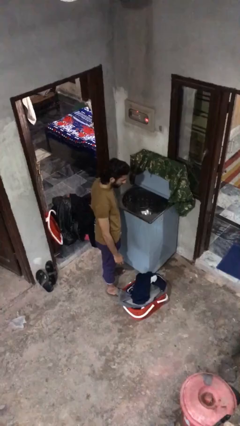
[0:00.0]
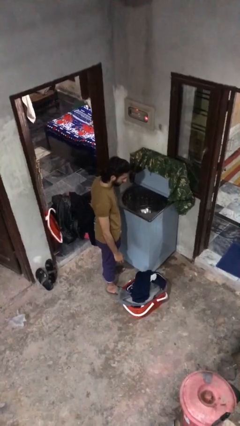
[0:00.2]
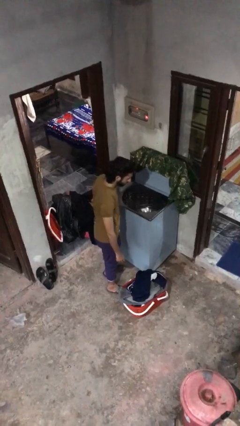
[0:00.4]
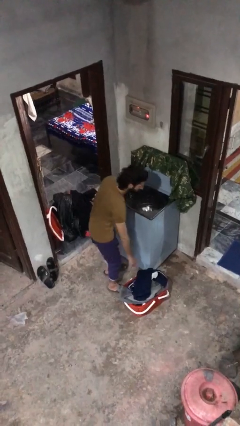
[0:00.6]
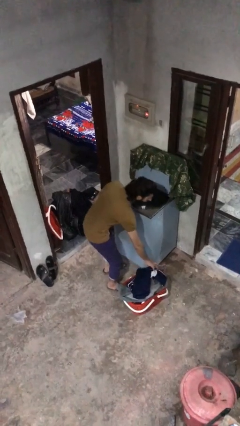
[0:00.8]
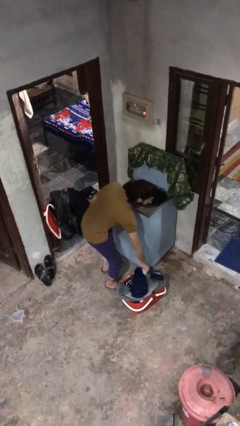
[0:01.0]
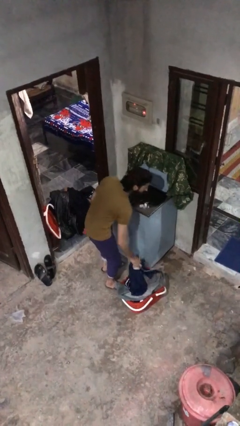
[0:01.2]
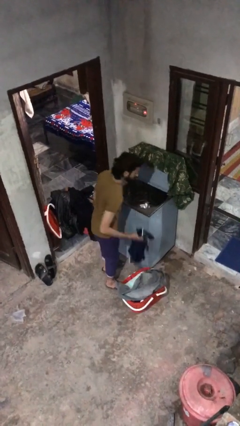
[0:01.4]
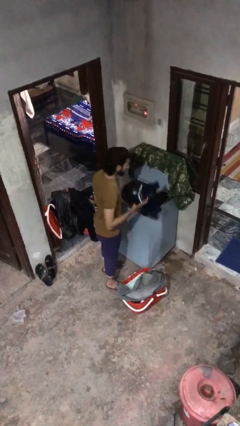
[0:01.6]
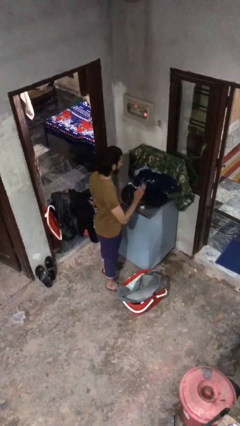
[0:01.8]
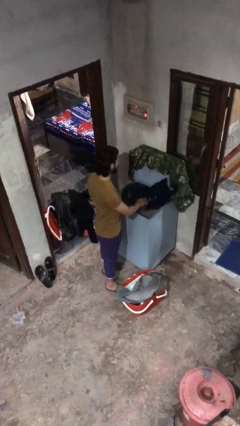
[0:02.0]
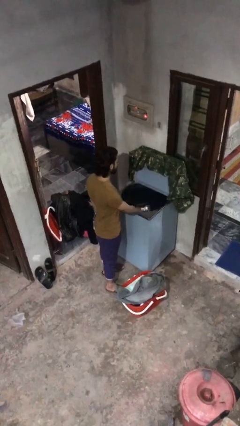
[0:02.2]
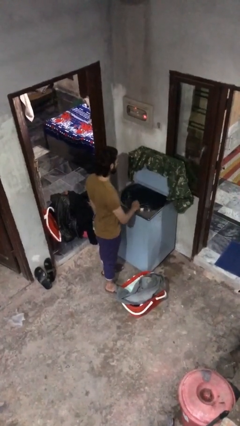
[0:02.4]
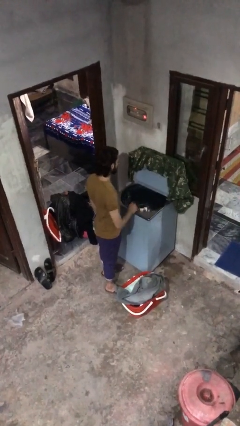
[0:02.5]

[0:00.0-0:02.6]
person loads clotheswasher

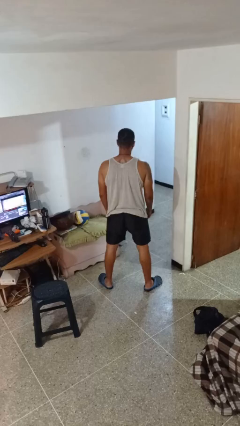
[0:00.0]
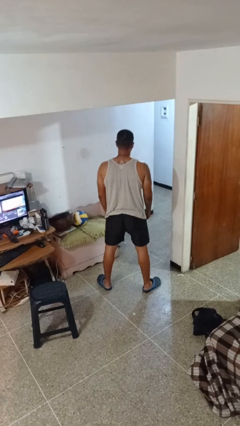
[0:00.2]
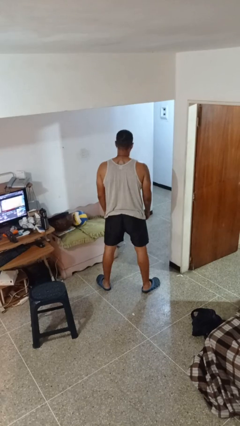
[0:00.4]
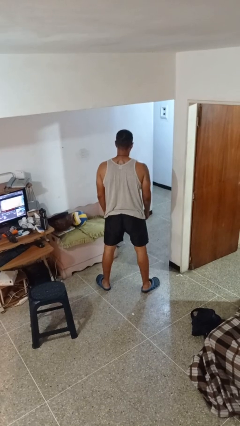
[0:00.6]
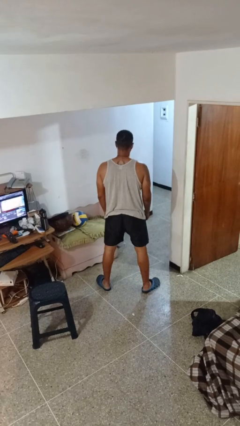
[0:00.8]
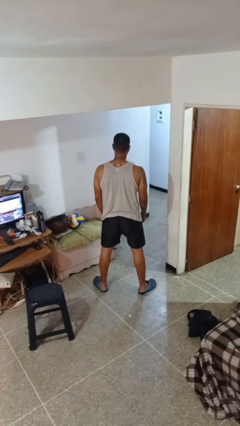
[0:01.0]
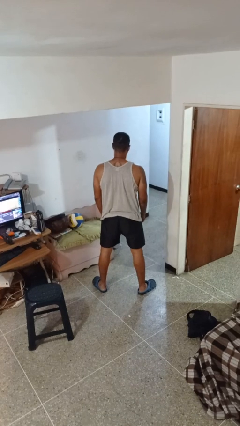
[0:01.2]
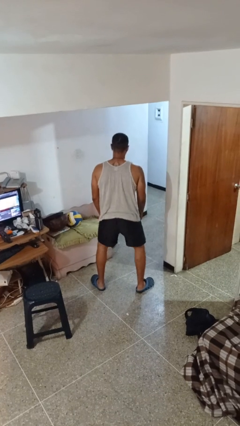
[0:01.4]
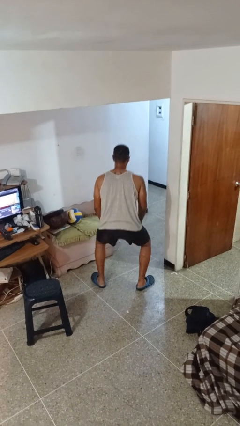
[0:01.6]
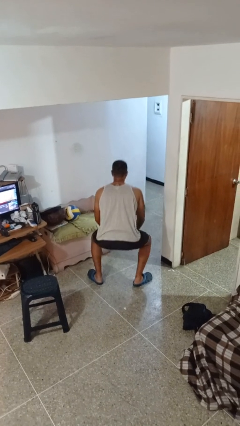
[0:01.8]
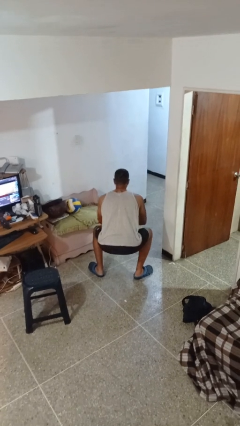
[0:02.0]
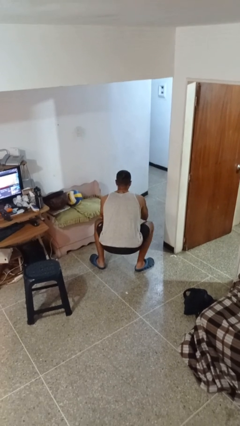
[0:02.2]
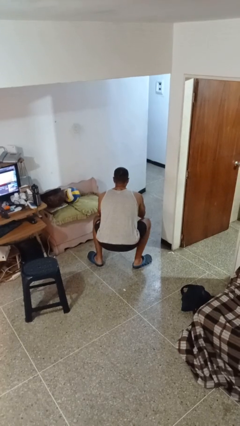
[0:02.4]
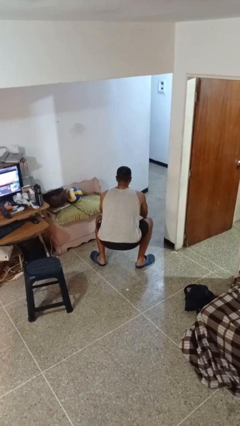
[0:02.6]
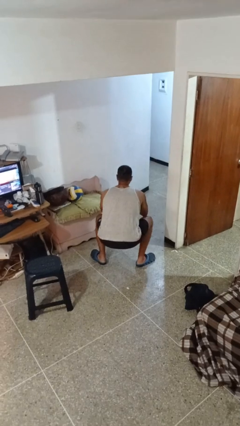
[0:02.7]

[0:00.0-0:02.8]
person squats

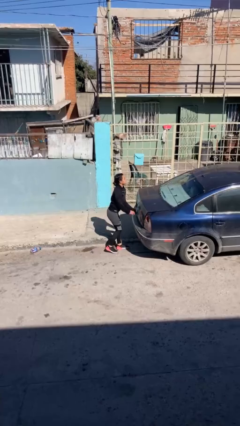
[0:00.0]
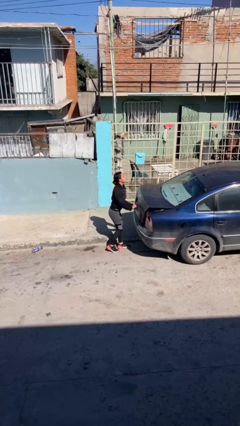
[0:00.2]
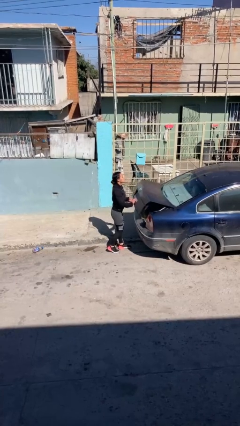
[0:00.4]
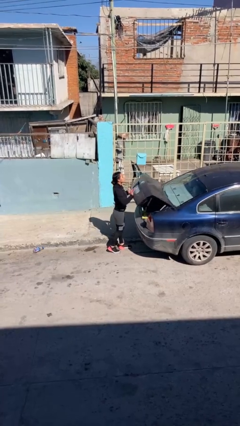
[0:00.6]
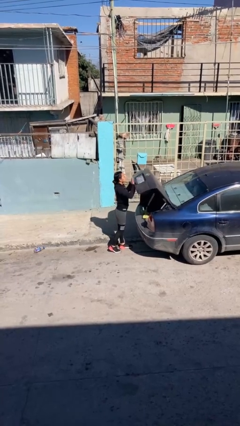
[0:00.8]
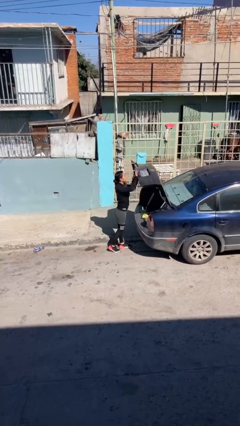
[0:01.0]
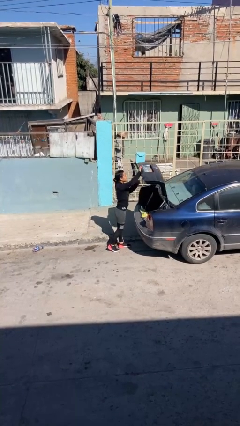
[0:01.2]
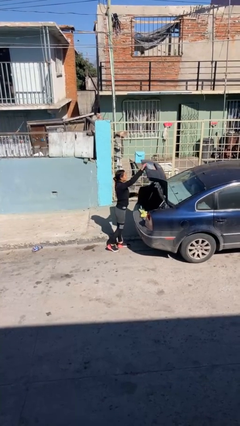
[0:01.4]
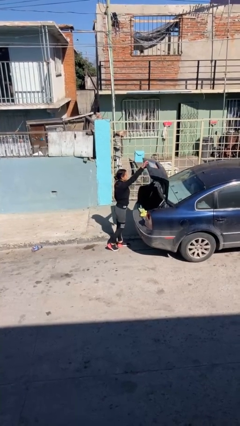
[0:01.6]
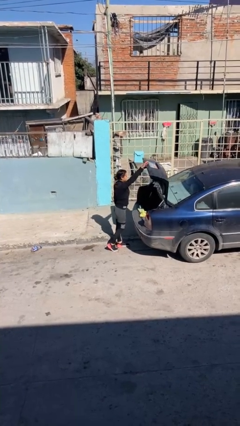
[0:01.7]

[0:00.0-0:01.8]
person opens car trunk

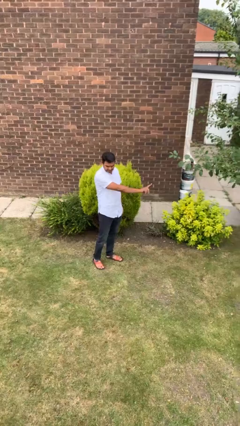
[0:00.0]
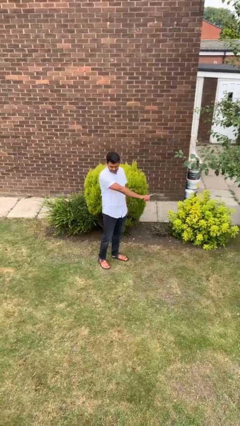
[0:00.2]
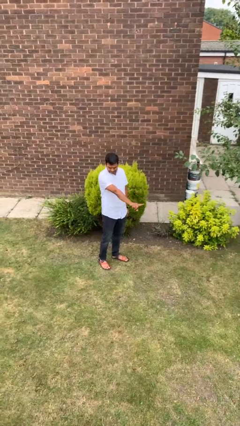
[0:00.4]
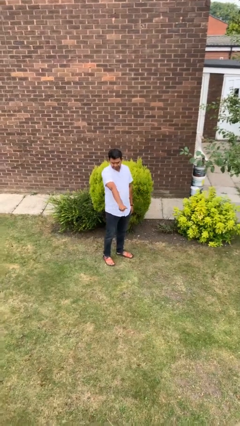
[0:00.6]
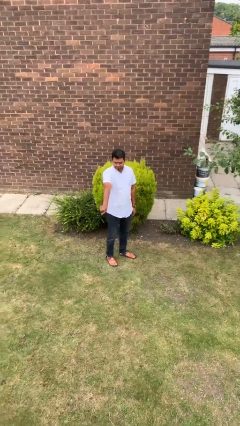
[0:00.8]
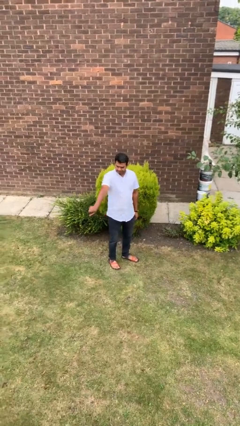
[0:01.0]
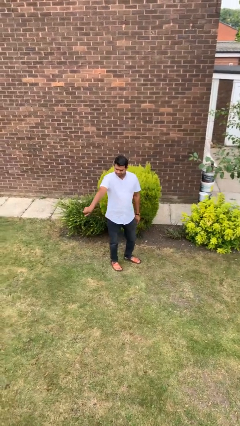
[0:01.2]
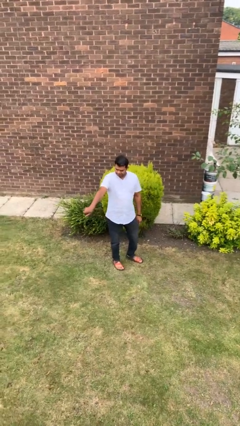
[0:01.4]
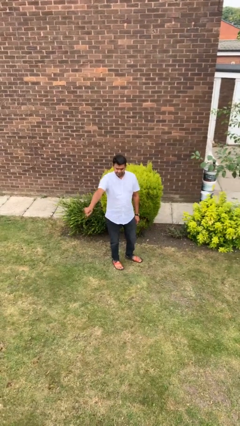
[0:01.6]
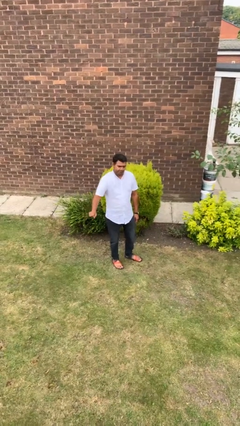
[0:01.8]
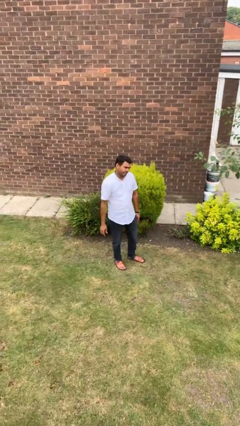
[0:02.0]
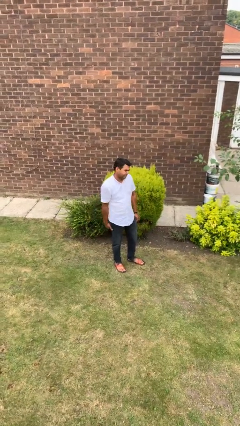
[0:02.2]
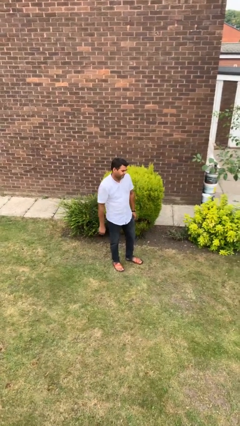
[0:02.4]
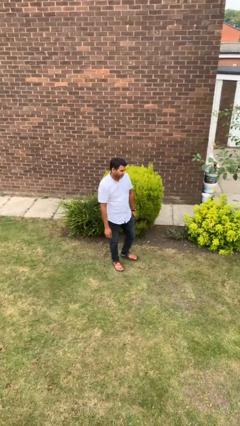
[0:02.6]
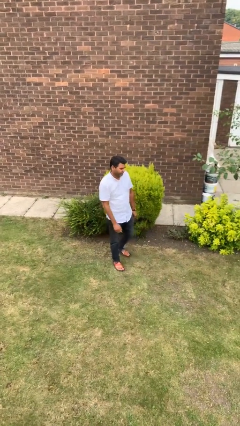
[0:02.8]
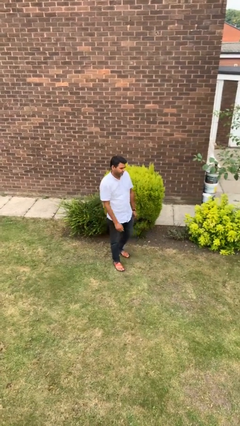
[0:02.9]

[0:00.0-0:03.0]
person gestures swipe right

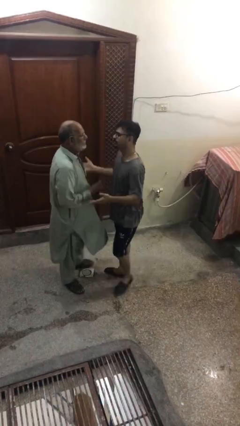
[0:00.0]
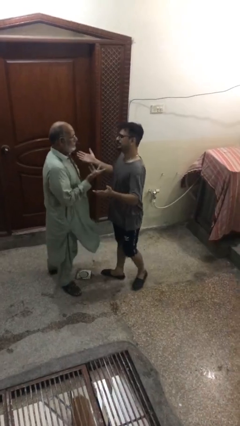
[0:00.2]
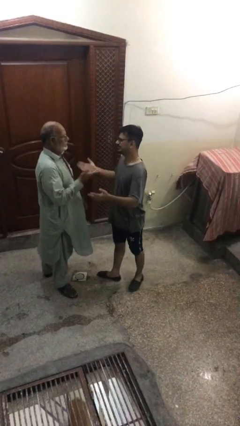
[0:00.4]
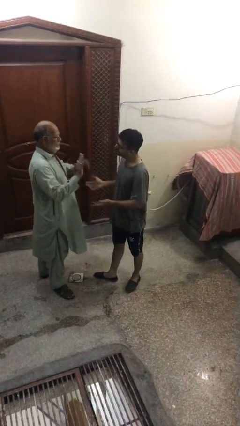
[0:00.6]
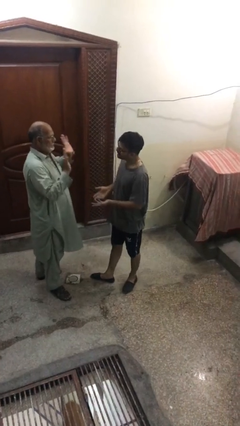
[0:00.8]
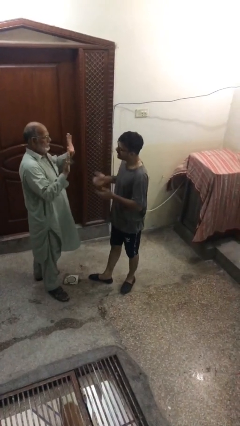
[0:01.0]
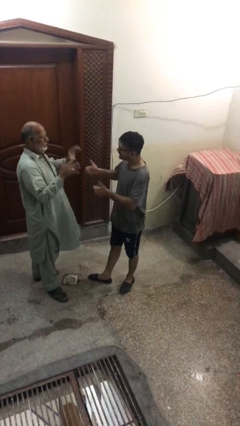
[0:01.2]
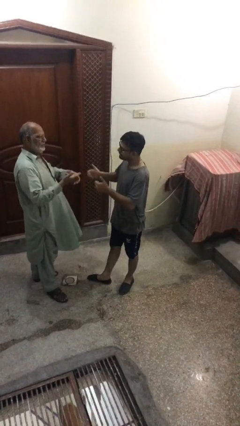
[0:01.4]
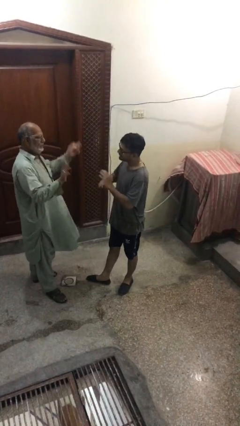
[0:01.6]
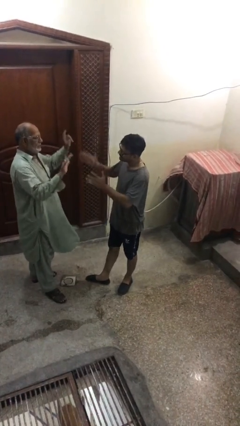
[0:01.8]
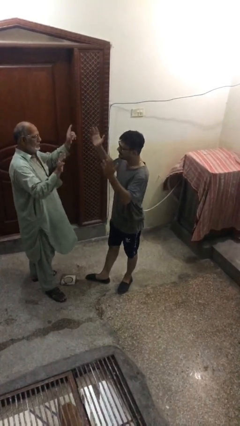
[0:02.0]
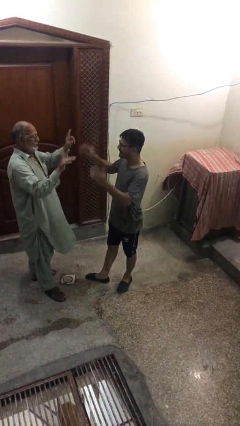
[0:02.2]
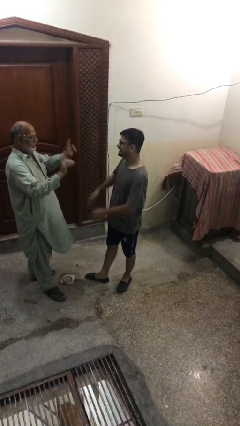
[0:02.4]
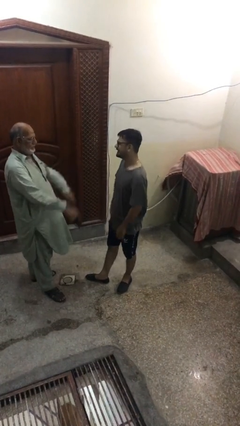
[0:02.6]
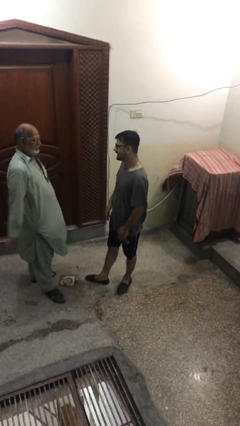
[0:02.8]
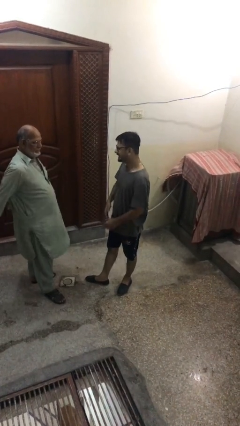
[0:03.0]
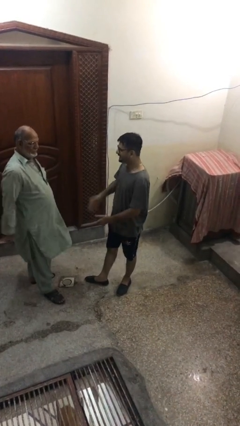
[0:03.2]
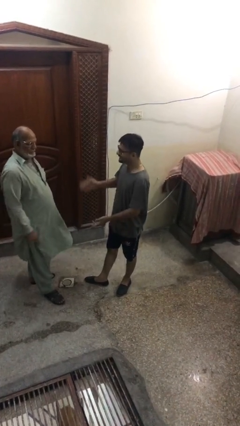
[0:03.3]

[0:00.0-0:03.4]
person talks to person

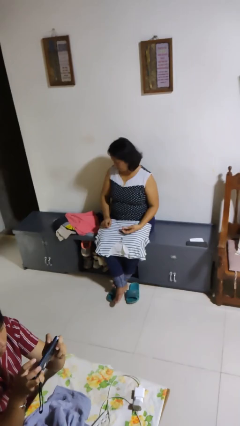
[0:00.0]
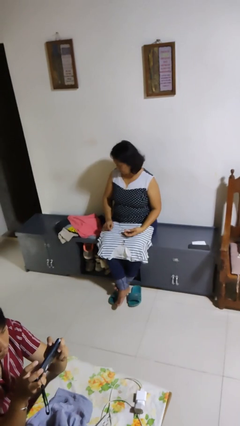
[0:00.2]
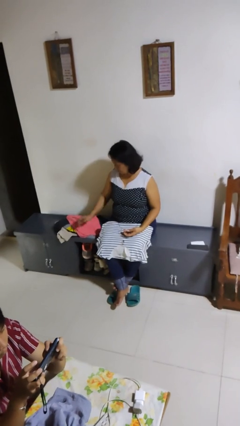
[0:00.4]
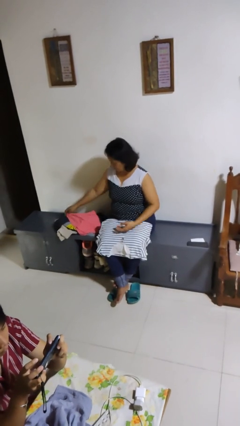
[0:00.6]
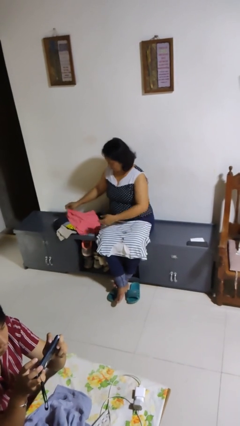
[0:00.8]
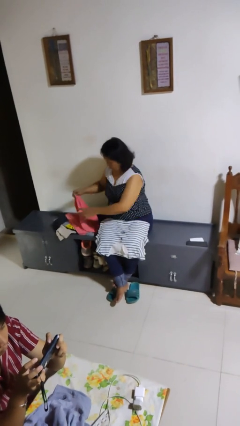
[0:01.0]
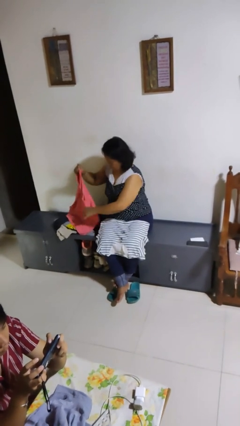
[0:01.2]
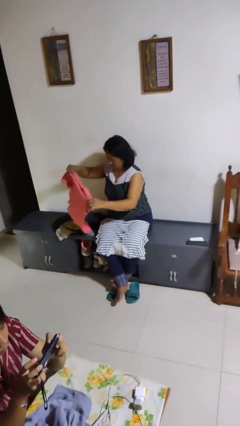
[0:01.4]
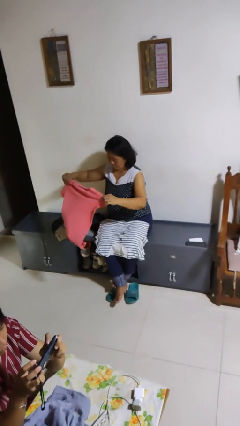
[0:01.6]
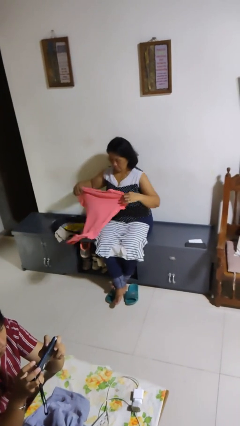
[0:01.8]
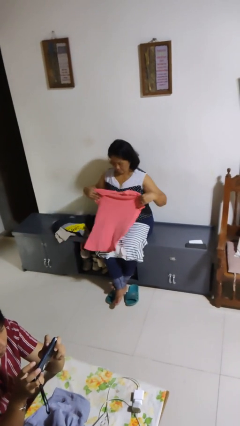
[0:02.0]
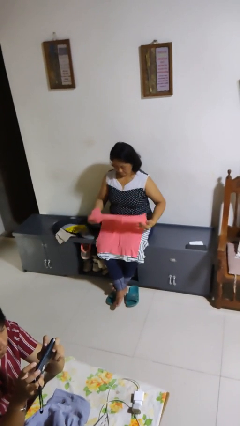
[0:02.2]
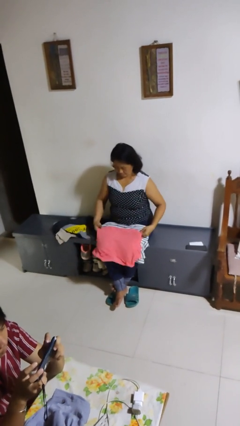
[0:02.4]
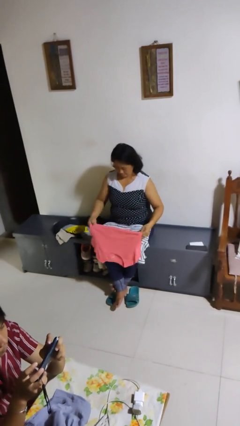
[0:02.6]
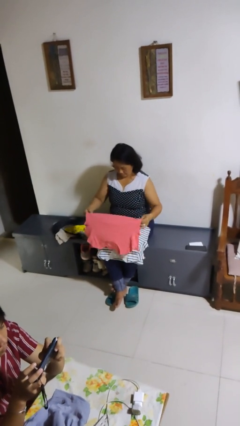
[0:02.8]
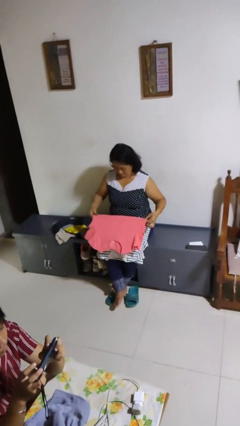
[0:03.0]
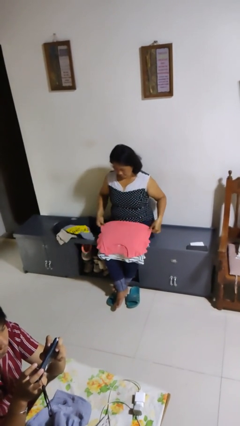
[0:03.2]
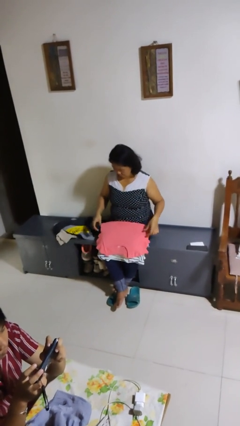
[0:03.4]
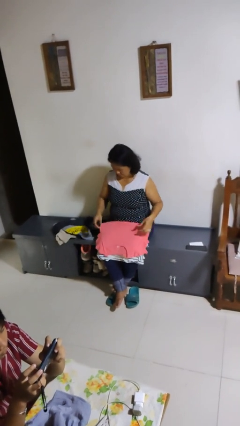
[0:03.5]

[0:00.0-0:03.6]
person folds shirt
